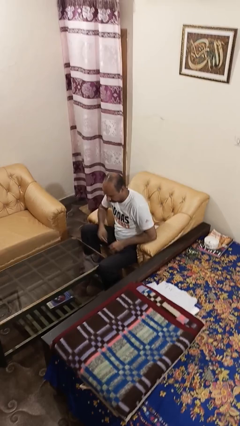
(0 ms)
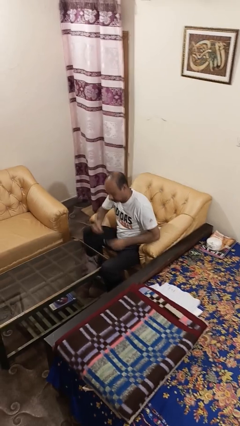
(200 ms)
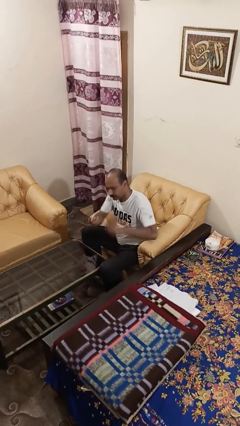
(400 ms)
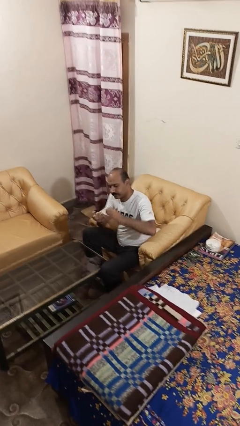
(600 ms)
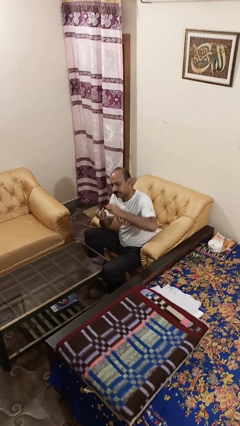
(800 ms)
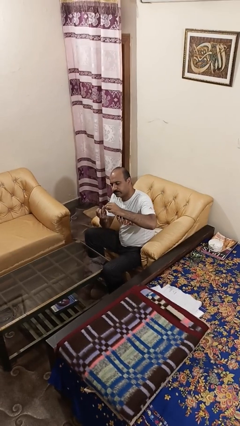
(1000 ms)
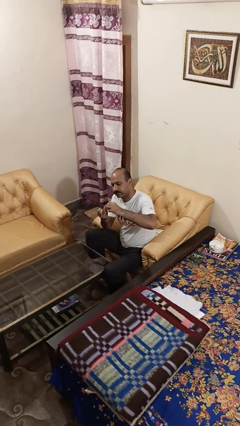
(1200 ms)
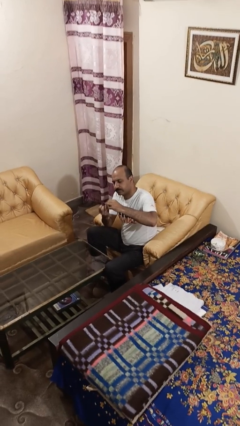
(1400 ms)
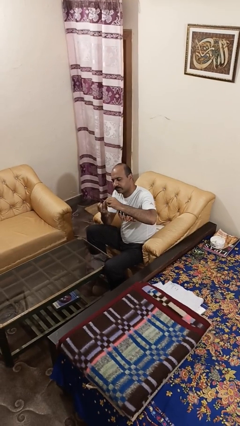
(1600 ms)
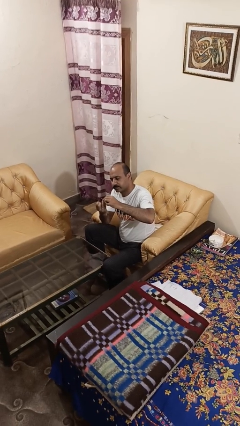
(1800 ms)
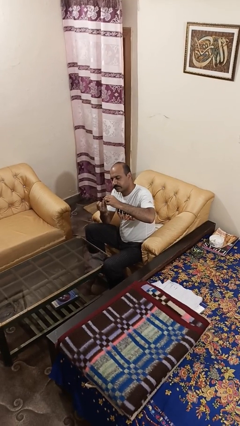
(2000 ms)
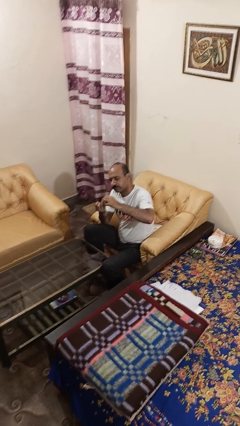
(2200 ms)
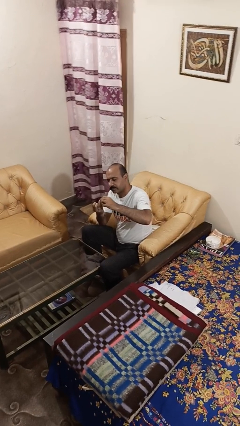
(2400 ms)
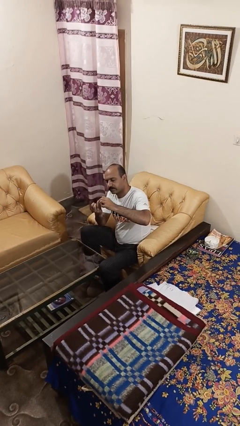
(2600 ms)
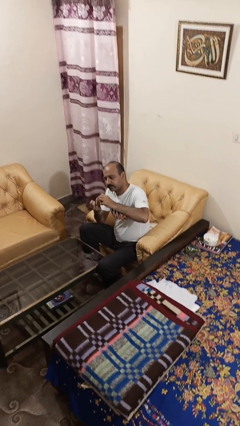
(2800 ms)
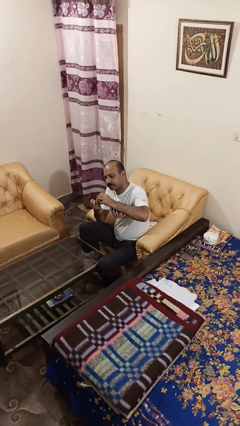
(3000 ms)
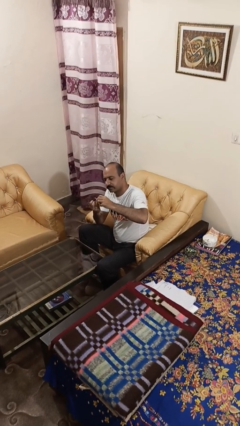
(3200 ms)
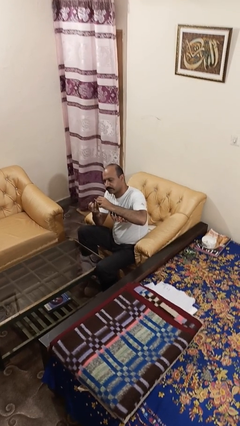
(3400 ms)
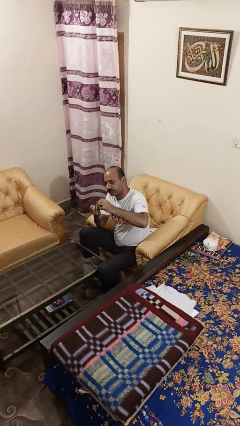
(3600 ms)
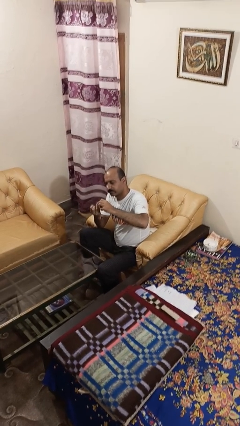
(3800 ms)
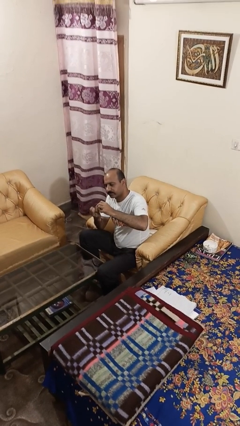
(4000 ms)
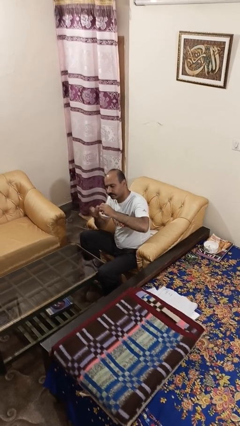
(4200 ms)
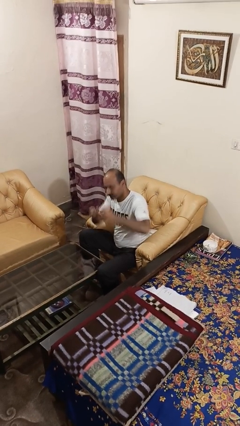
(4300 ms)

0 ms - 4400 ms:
person files fingernails

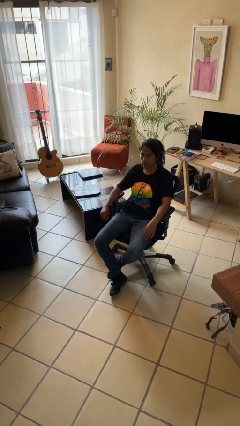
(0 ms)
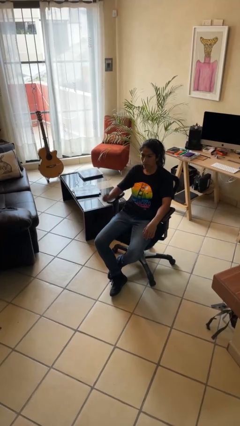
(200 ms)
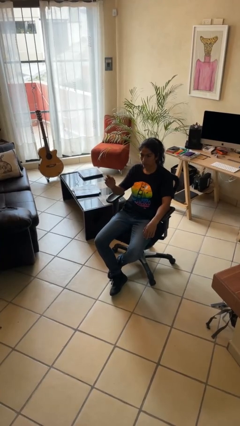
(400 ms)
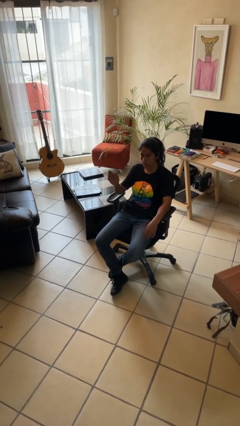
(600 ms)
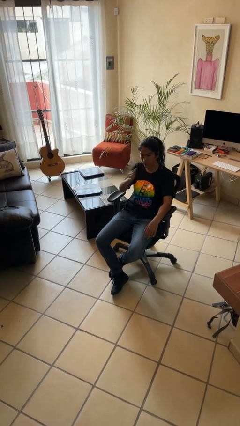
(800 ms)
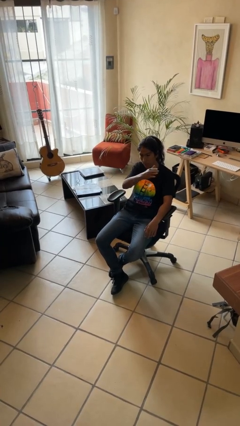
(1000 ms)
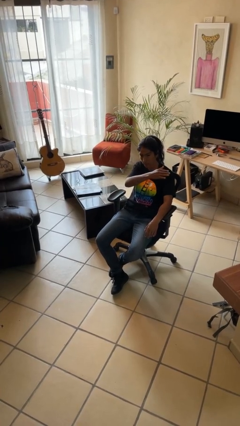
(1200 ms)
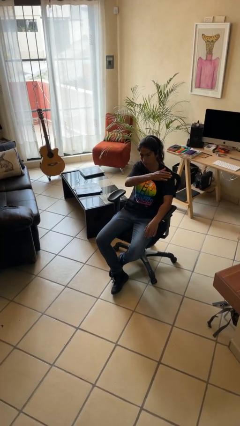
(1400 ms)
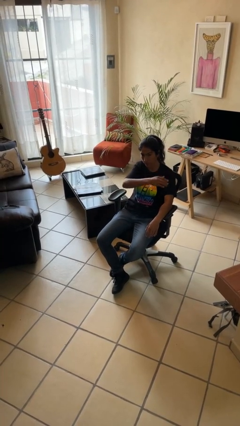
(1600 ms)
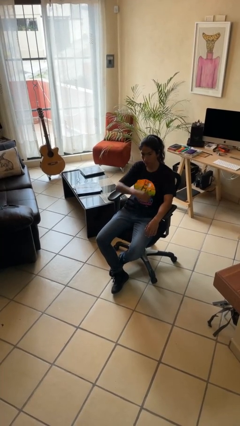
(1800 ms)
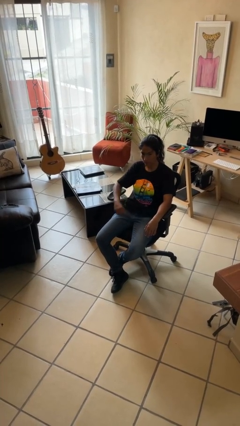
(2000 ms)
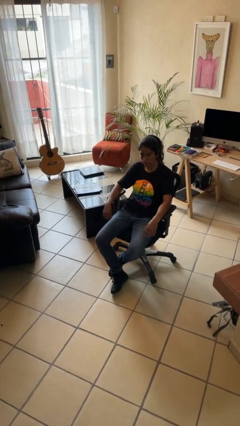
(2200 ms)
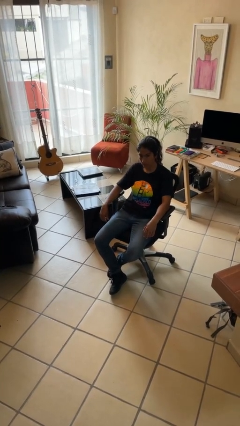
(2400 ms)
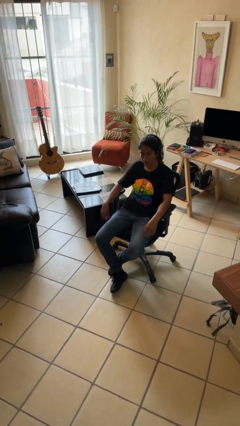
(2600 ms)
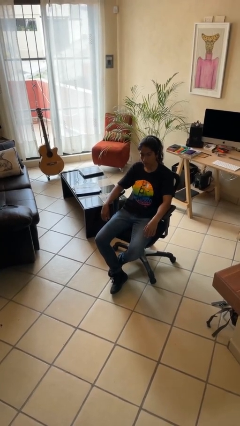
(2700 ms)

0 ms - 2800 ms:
person gestures swipe left

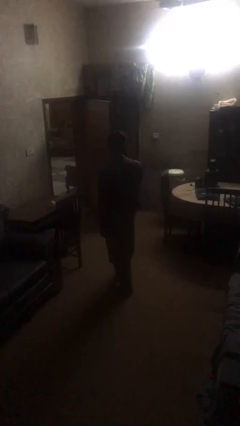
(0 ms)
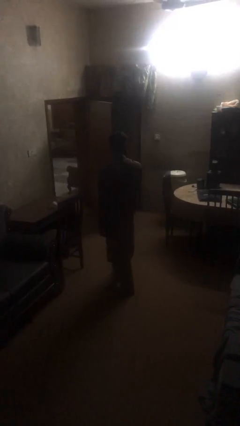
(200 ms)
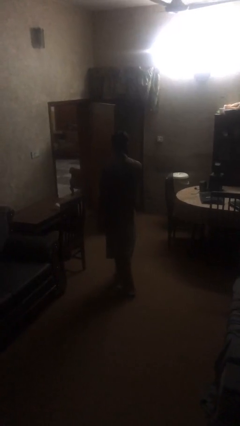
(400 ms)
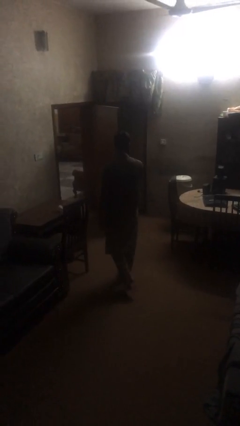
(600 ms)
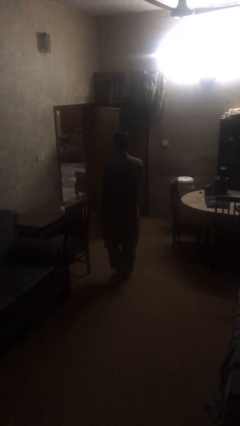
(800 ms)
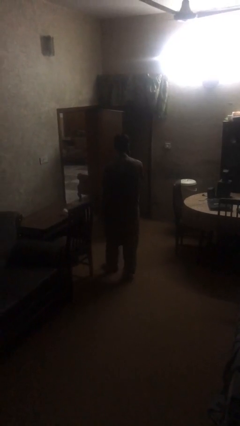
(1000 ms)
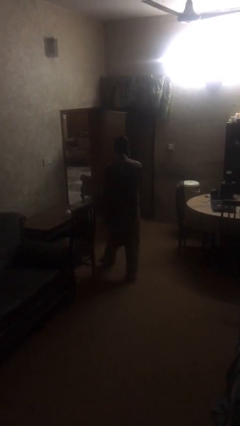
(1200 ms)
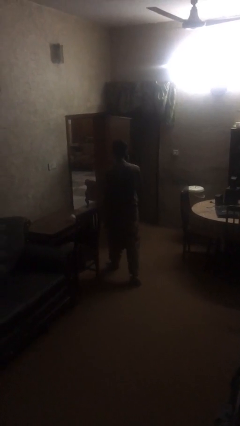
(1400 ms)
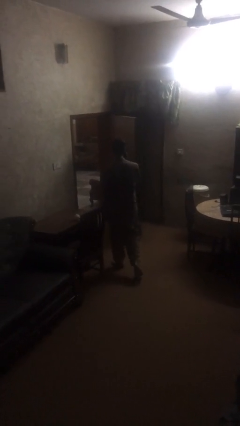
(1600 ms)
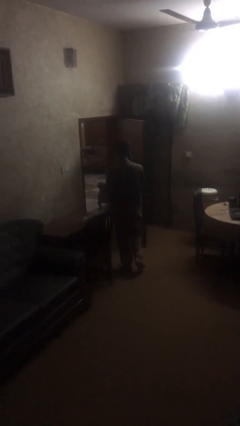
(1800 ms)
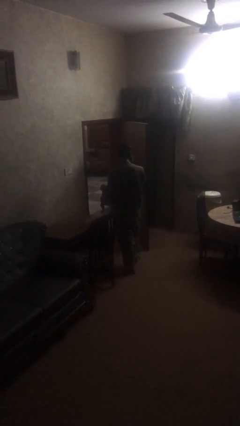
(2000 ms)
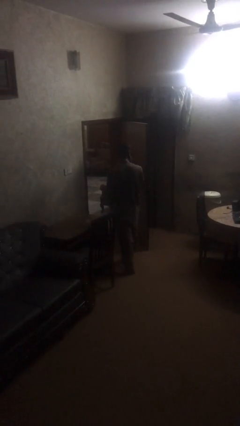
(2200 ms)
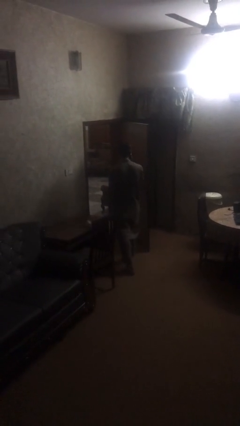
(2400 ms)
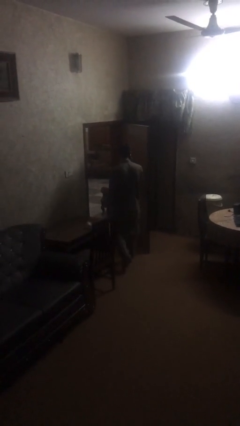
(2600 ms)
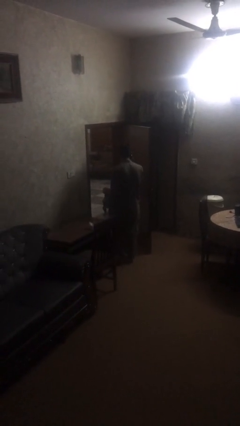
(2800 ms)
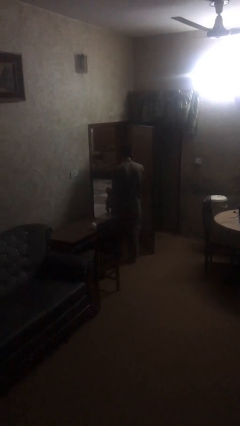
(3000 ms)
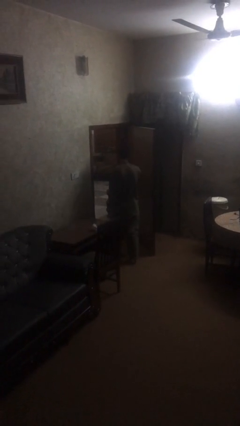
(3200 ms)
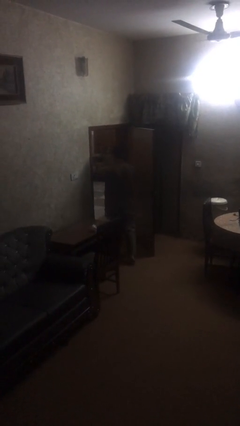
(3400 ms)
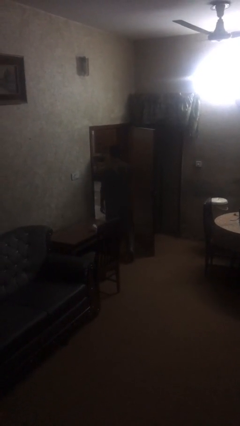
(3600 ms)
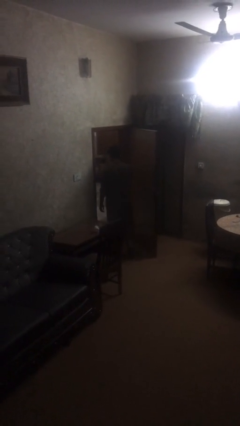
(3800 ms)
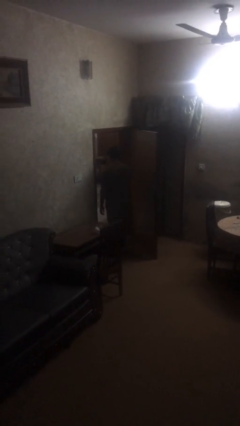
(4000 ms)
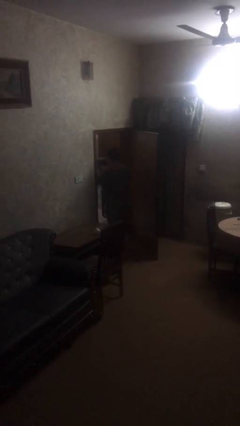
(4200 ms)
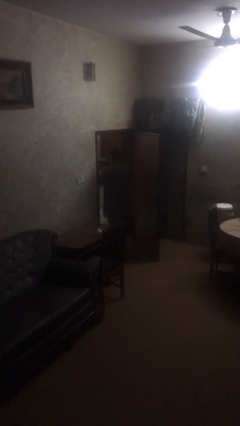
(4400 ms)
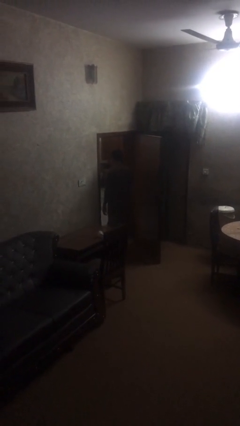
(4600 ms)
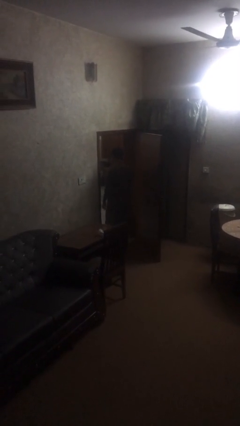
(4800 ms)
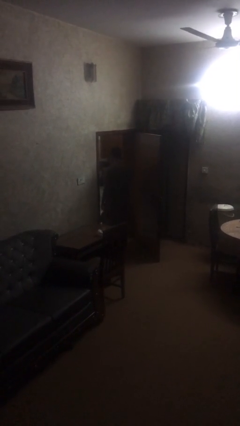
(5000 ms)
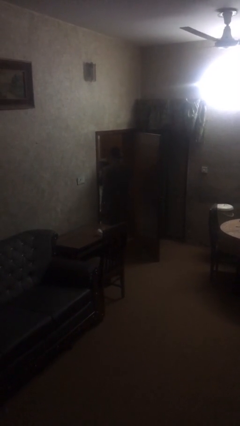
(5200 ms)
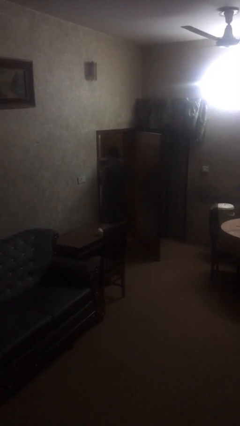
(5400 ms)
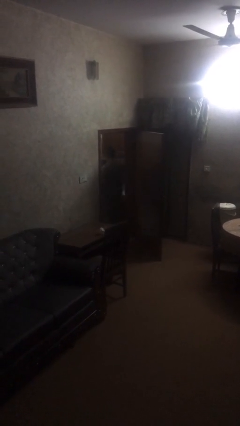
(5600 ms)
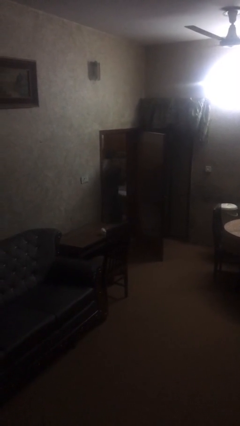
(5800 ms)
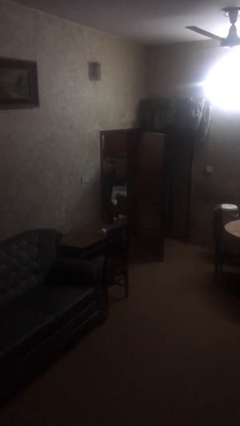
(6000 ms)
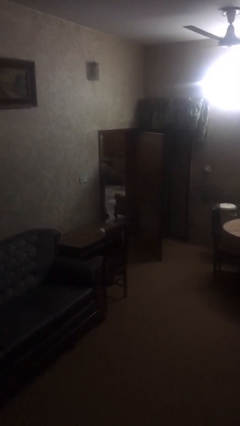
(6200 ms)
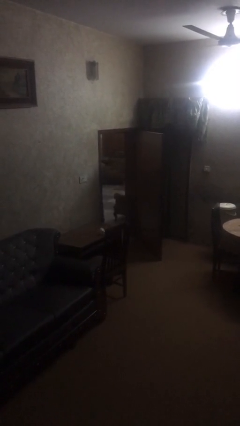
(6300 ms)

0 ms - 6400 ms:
person exits scene through structure

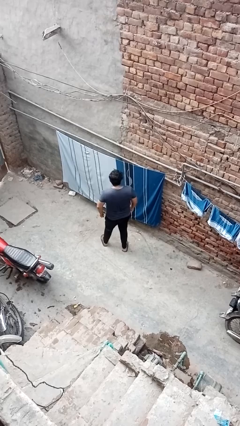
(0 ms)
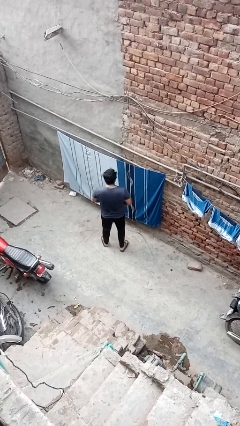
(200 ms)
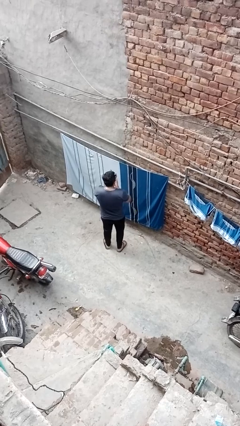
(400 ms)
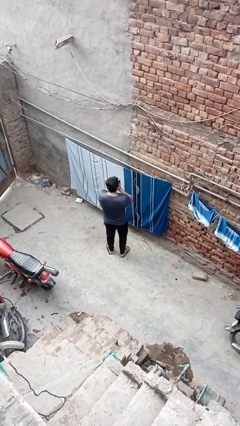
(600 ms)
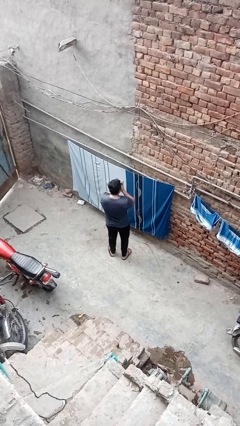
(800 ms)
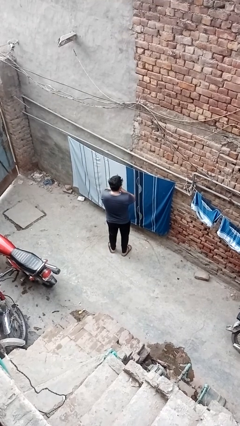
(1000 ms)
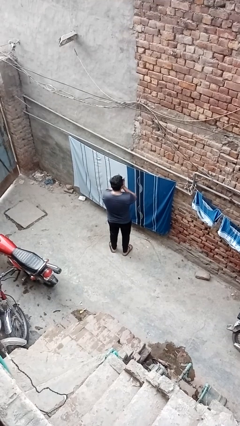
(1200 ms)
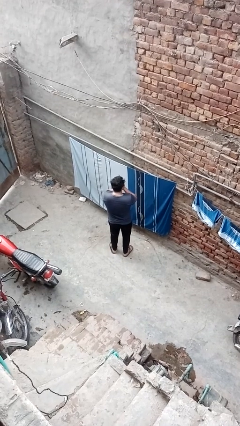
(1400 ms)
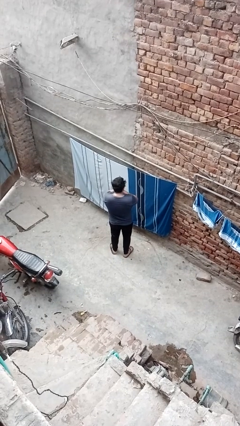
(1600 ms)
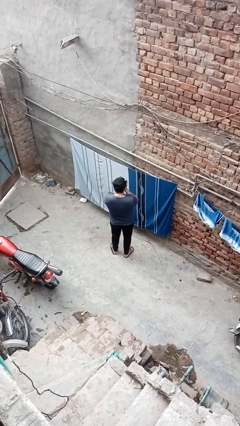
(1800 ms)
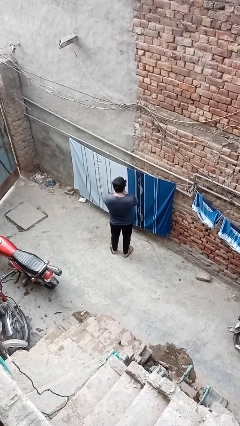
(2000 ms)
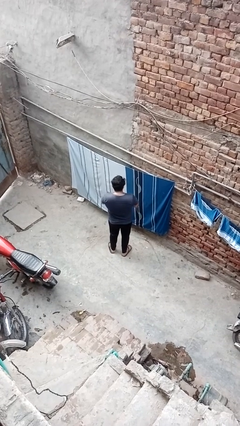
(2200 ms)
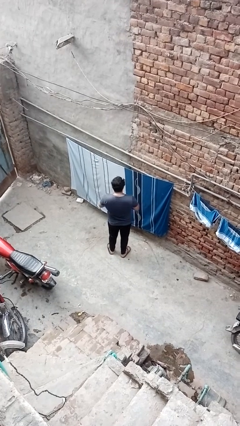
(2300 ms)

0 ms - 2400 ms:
person blows into hands

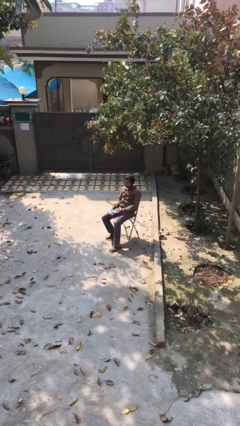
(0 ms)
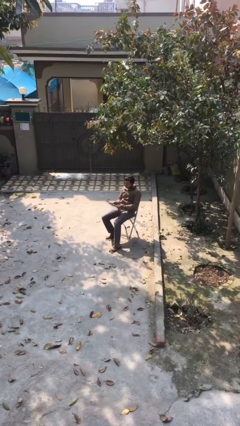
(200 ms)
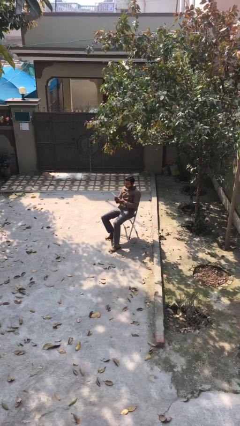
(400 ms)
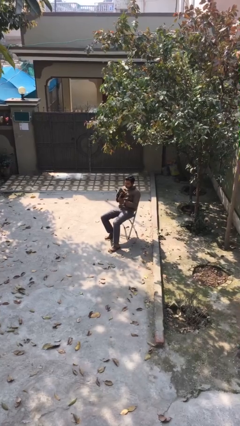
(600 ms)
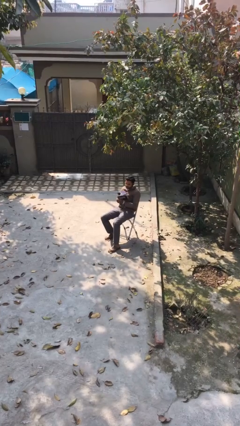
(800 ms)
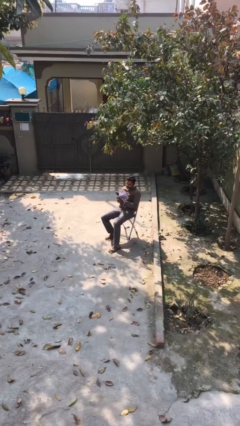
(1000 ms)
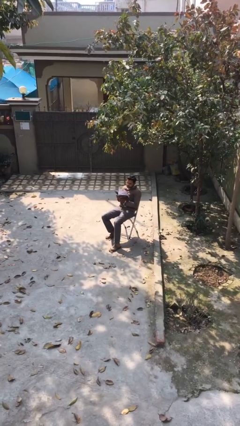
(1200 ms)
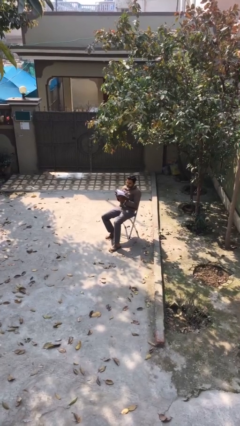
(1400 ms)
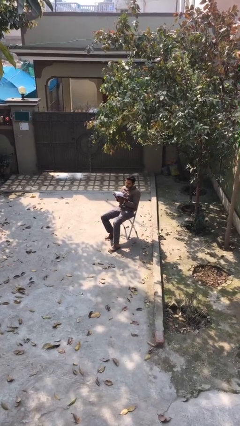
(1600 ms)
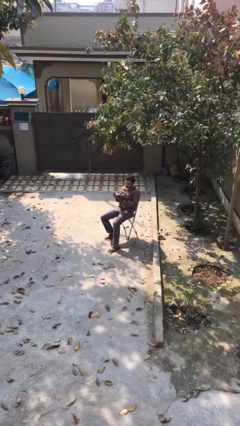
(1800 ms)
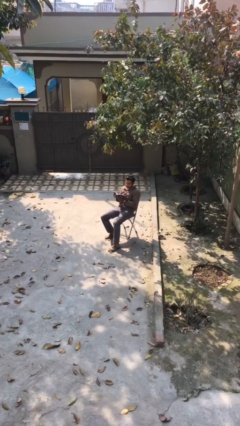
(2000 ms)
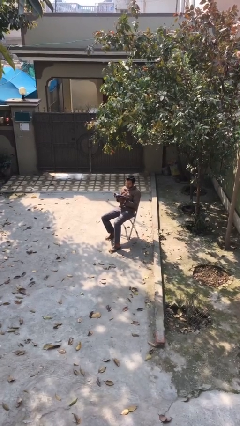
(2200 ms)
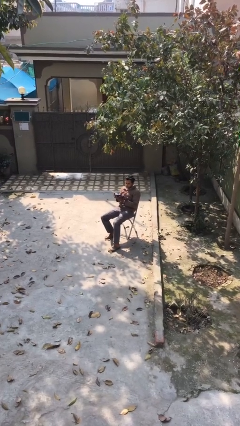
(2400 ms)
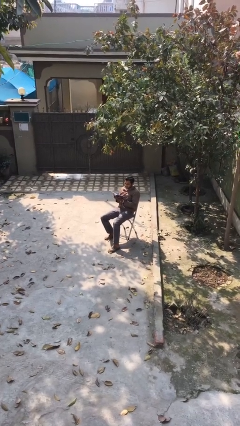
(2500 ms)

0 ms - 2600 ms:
person reads document
